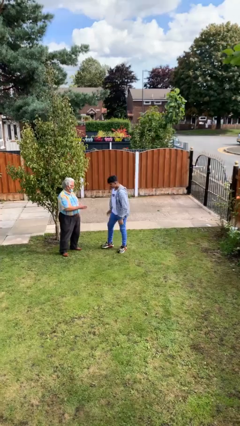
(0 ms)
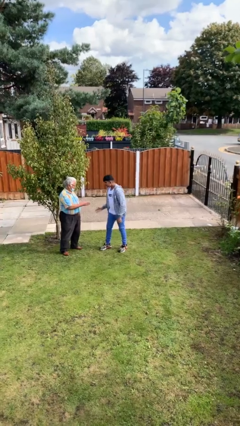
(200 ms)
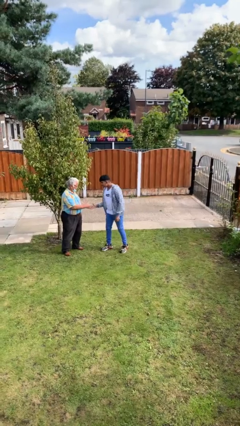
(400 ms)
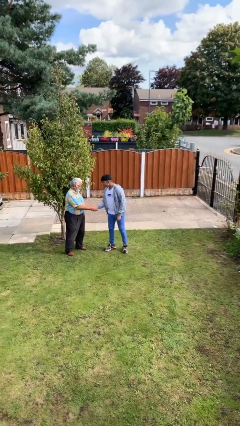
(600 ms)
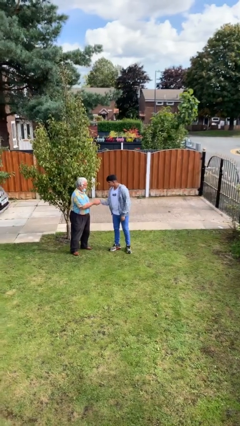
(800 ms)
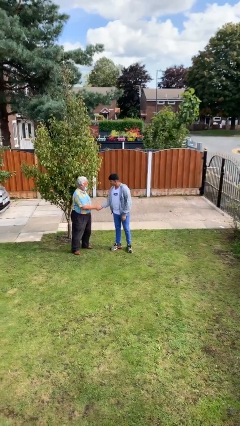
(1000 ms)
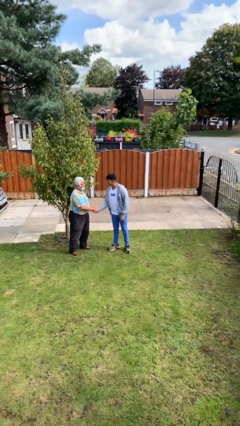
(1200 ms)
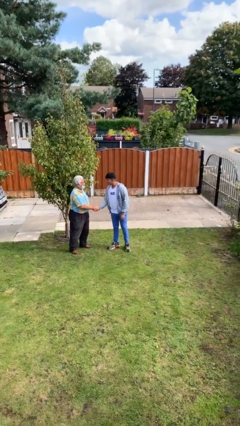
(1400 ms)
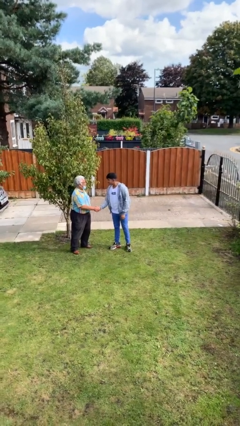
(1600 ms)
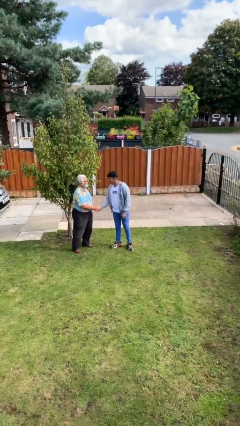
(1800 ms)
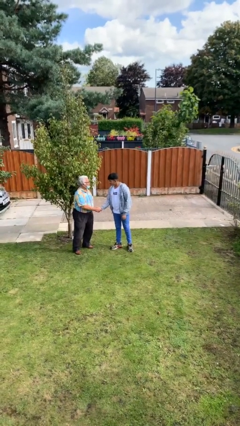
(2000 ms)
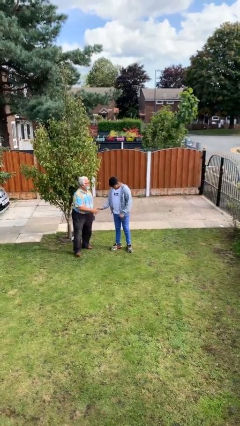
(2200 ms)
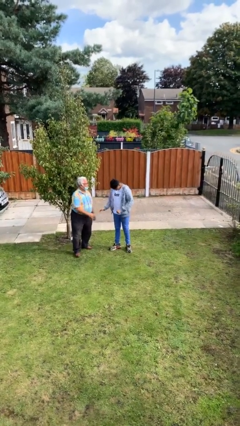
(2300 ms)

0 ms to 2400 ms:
person shakes hand

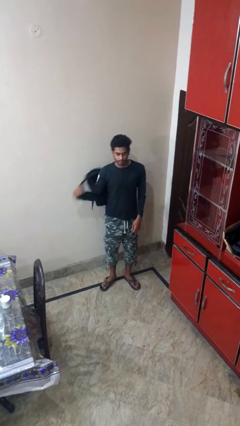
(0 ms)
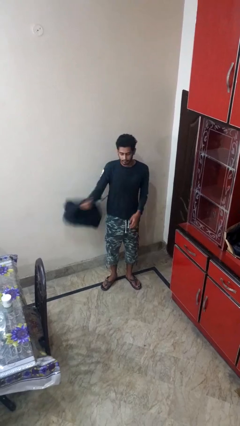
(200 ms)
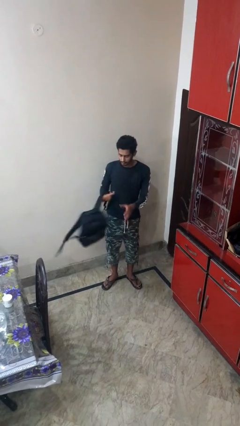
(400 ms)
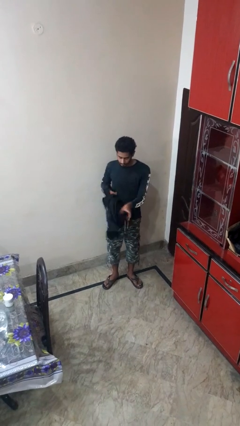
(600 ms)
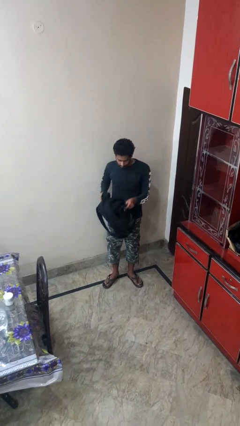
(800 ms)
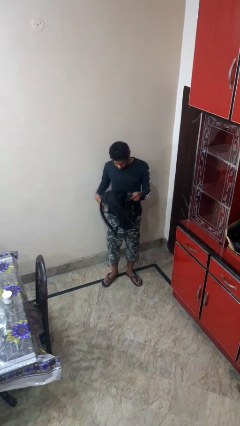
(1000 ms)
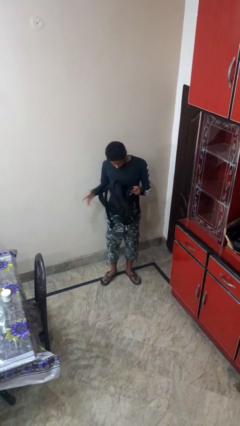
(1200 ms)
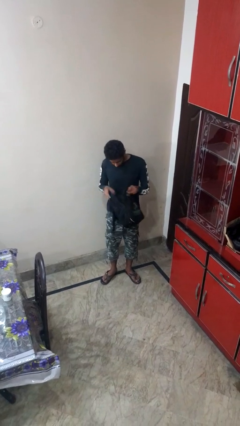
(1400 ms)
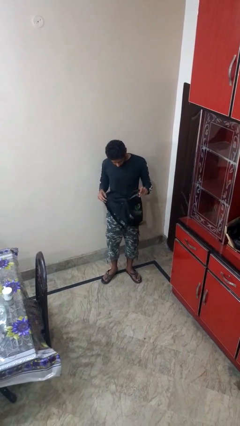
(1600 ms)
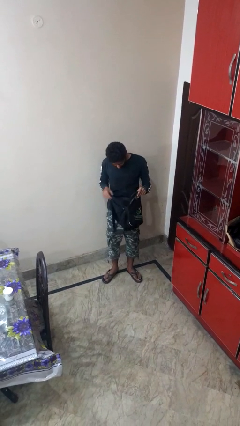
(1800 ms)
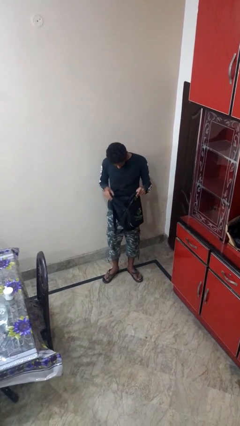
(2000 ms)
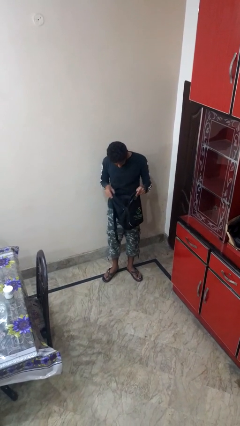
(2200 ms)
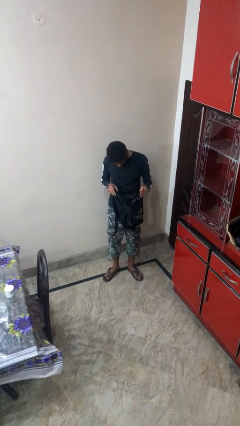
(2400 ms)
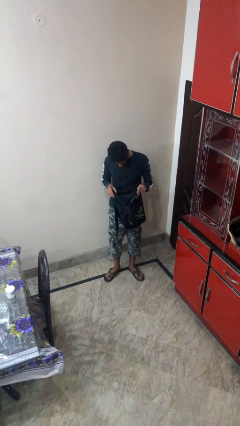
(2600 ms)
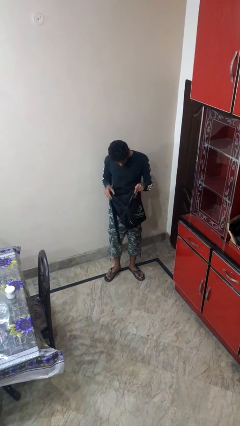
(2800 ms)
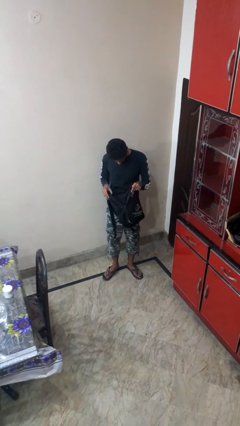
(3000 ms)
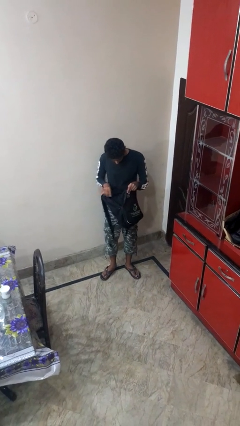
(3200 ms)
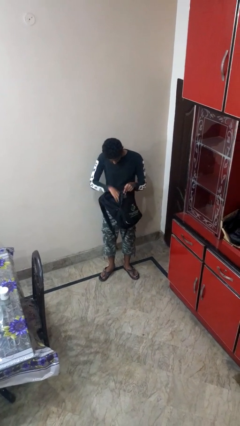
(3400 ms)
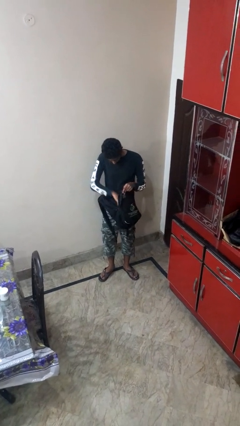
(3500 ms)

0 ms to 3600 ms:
person searches in backpack

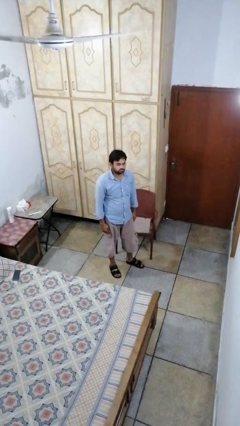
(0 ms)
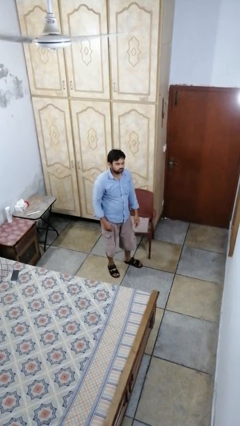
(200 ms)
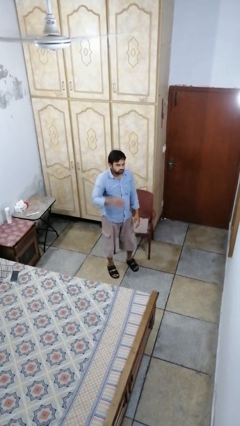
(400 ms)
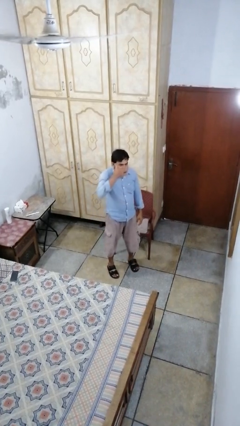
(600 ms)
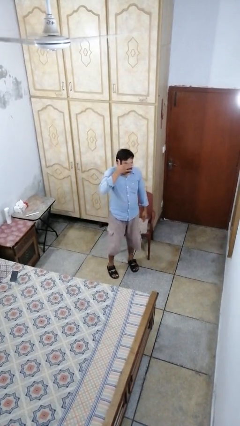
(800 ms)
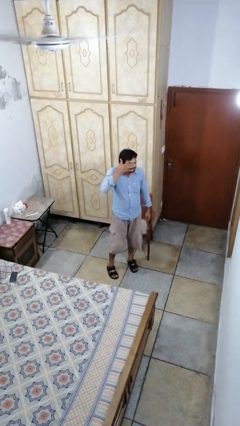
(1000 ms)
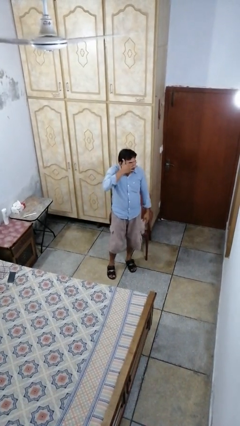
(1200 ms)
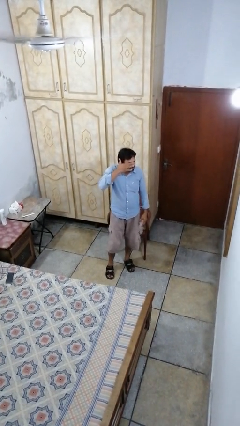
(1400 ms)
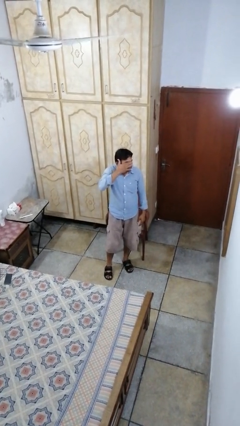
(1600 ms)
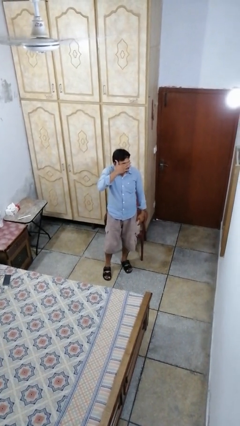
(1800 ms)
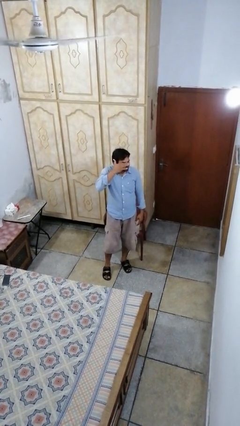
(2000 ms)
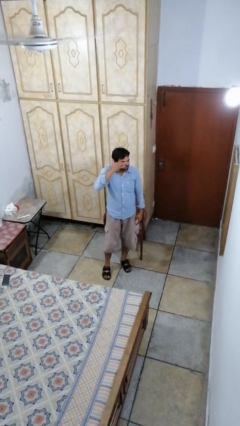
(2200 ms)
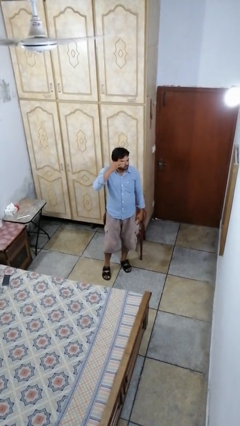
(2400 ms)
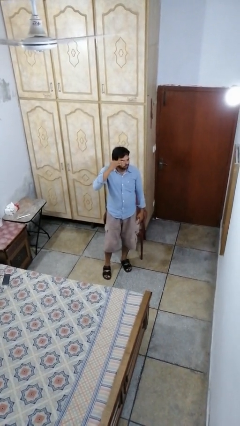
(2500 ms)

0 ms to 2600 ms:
person rubs eyes

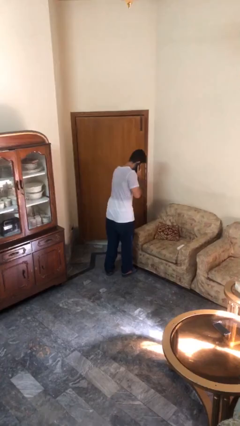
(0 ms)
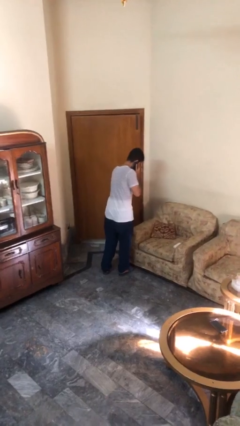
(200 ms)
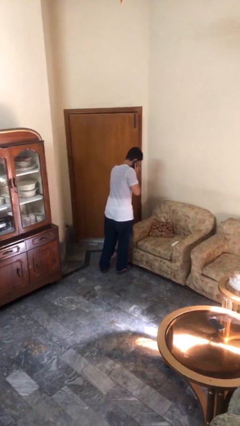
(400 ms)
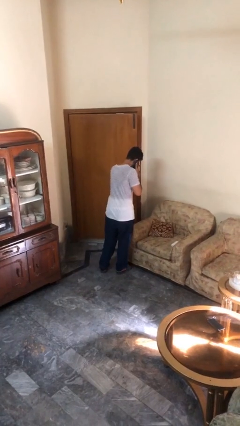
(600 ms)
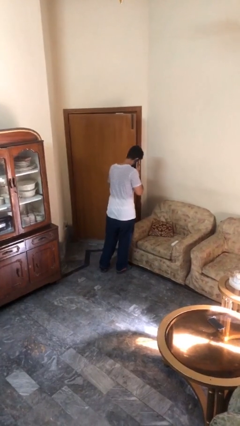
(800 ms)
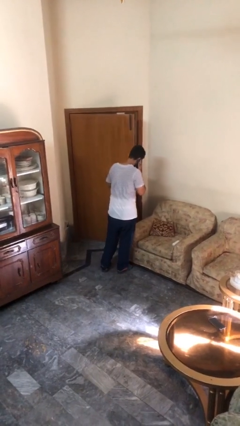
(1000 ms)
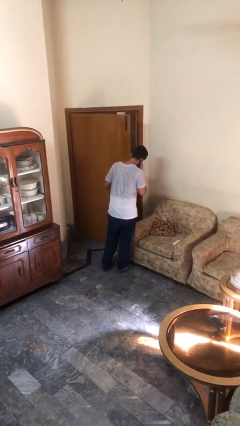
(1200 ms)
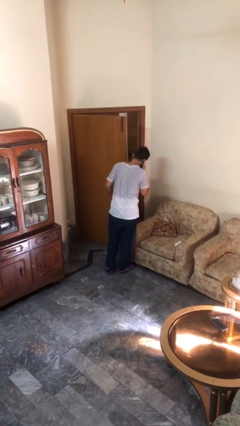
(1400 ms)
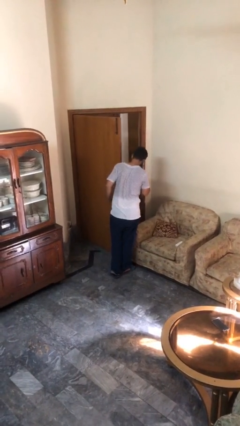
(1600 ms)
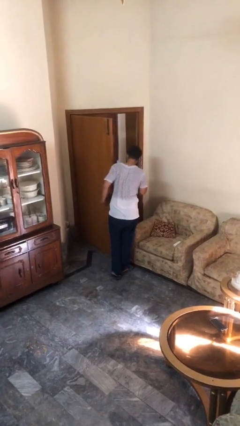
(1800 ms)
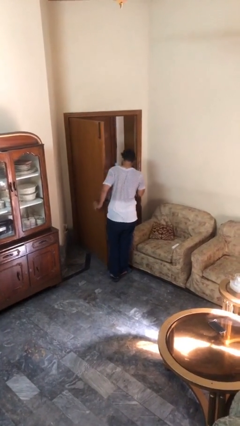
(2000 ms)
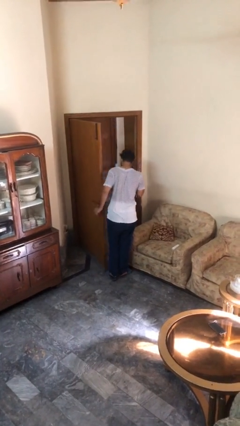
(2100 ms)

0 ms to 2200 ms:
person opens facility door

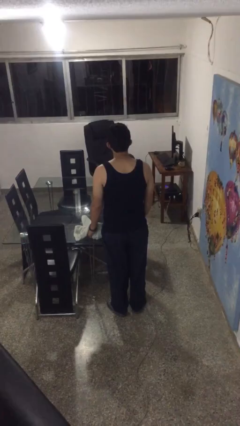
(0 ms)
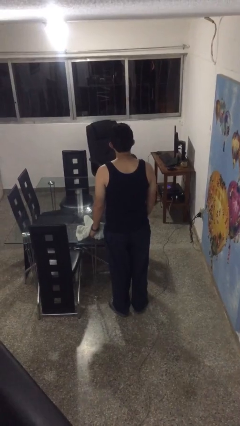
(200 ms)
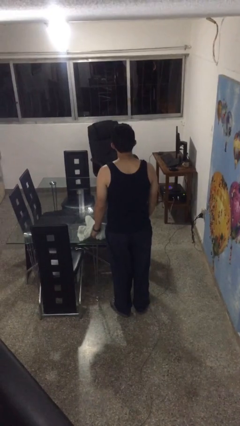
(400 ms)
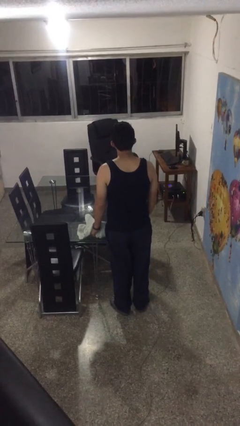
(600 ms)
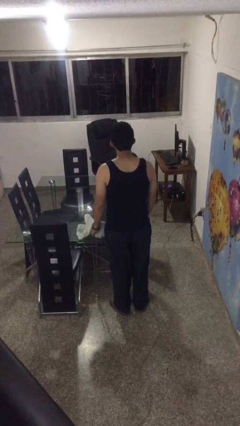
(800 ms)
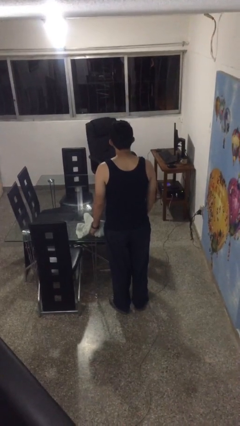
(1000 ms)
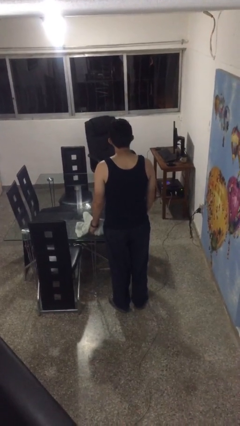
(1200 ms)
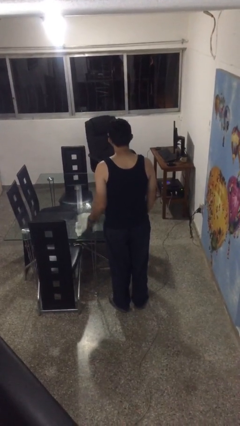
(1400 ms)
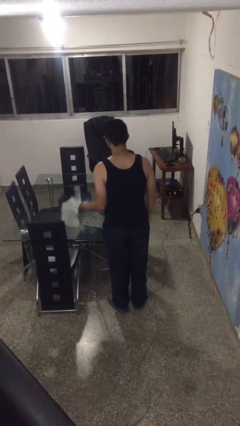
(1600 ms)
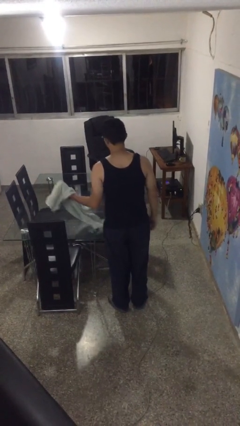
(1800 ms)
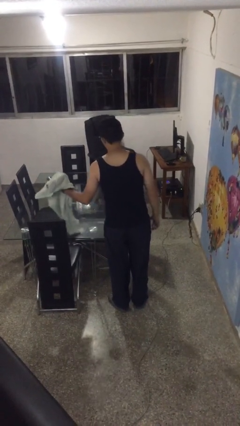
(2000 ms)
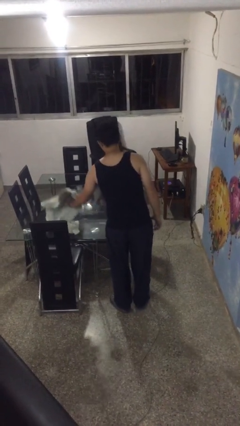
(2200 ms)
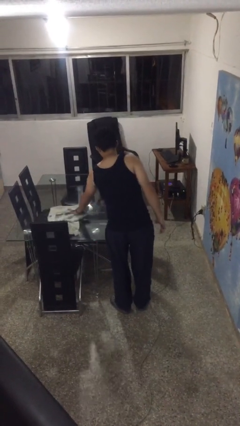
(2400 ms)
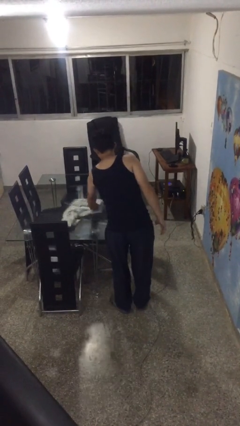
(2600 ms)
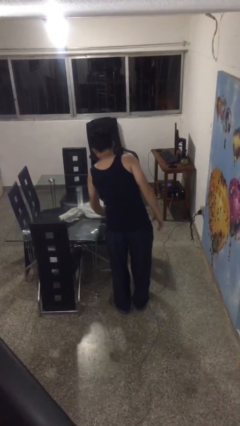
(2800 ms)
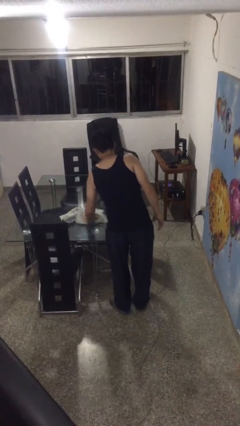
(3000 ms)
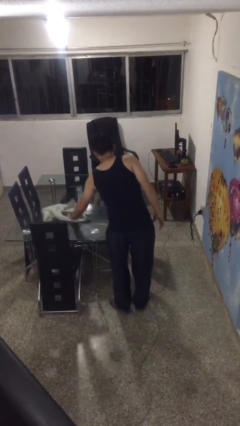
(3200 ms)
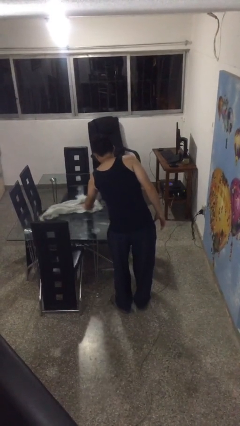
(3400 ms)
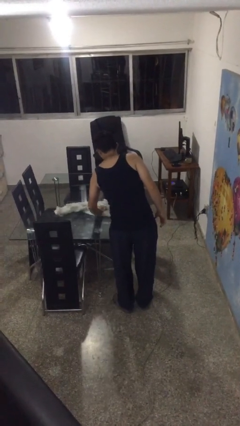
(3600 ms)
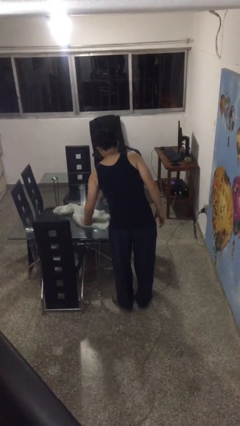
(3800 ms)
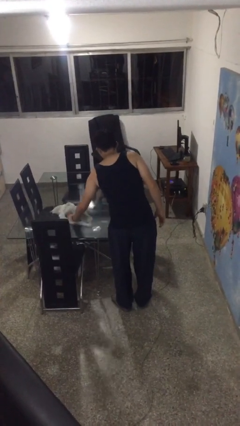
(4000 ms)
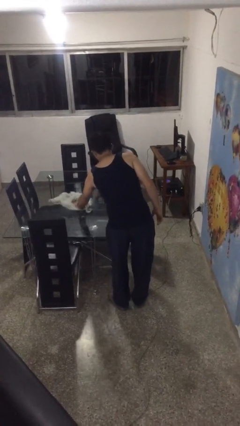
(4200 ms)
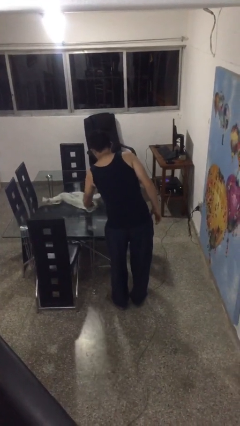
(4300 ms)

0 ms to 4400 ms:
person cleans table with rag

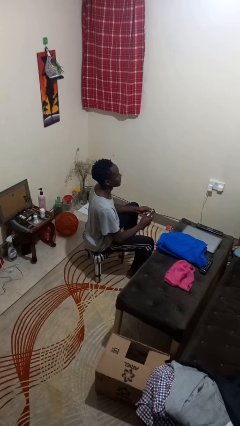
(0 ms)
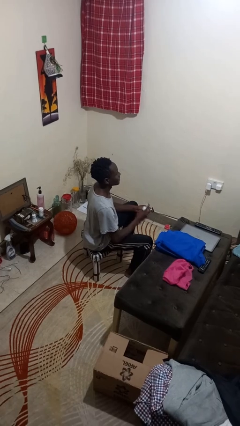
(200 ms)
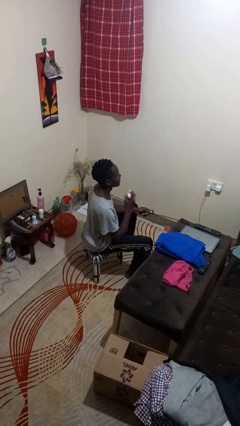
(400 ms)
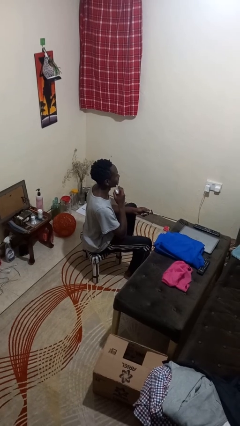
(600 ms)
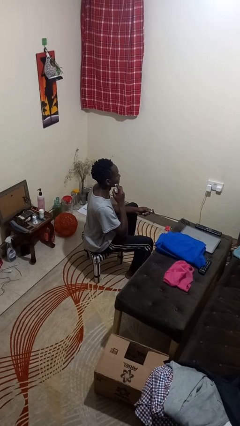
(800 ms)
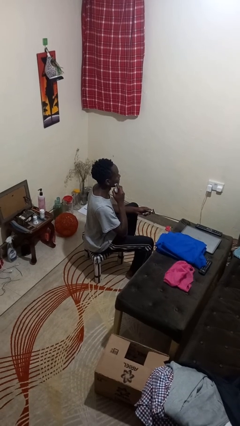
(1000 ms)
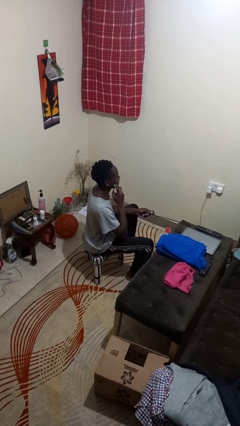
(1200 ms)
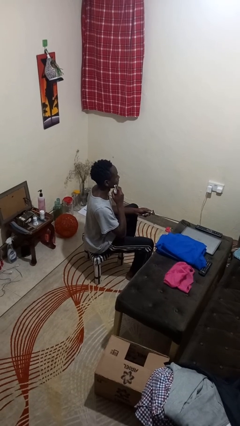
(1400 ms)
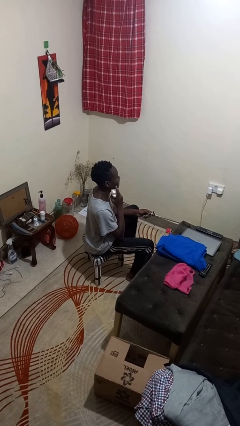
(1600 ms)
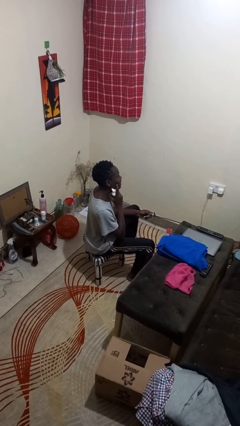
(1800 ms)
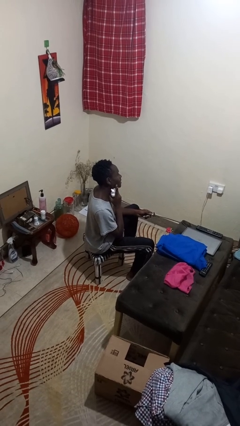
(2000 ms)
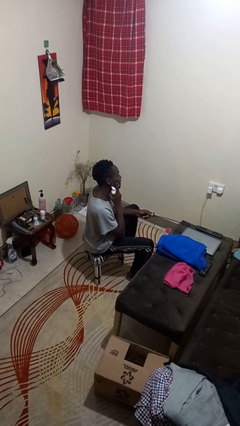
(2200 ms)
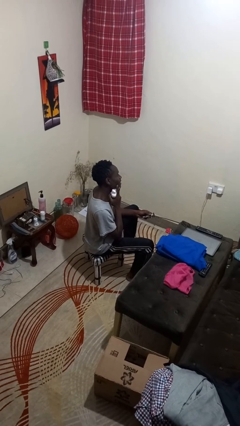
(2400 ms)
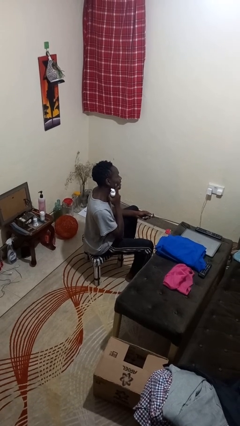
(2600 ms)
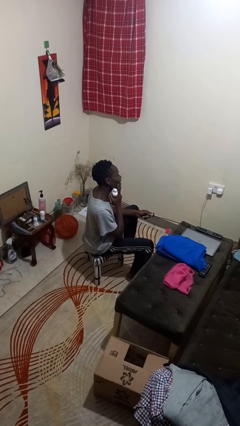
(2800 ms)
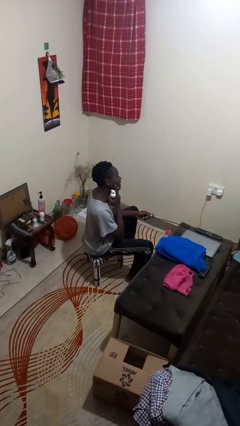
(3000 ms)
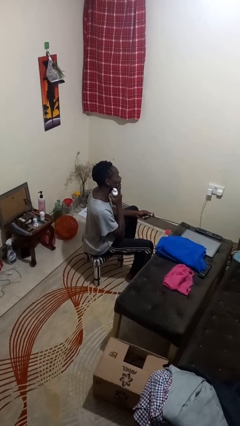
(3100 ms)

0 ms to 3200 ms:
person applies shaving cream
